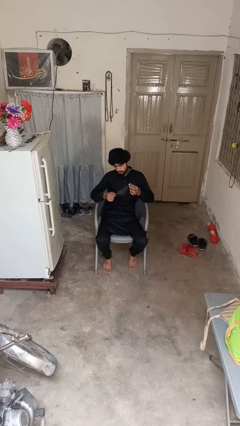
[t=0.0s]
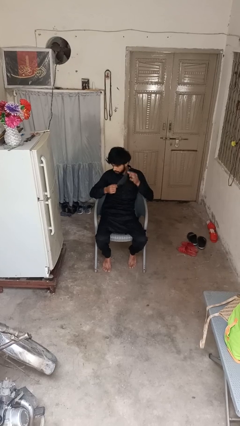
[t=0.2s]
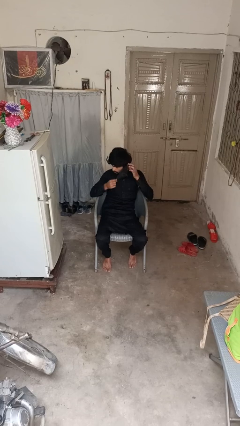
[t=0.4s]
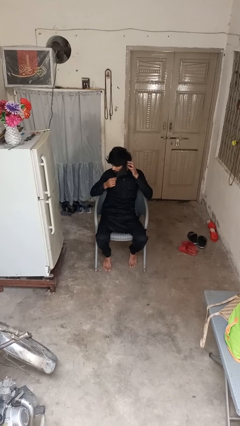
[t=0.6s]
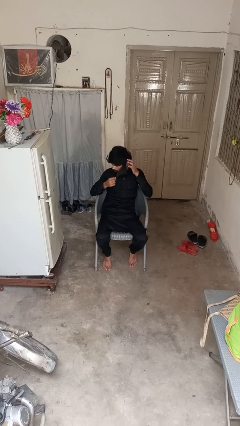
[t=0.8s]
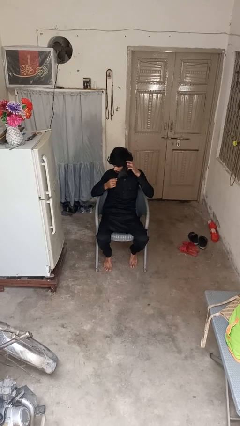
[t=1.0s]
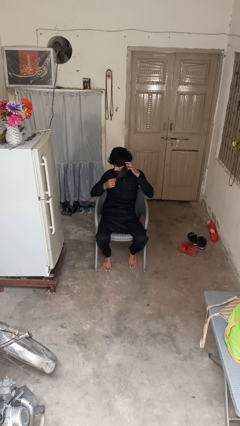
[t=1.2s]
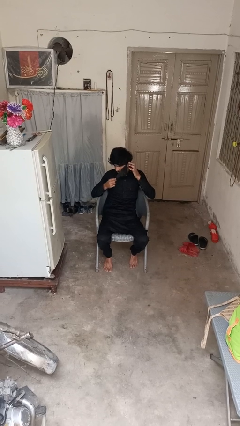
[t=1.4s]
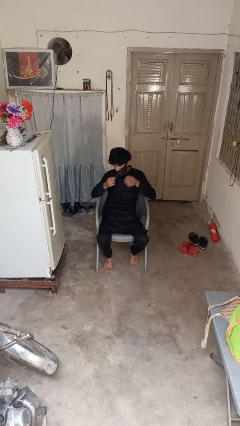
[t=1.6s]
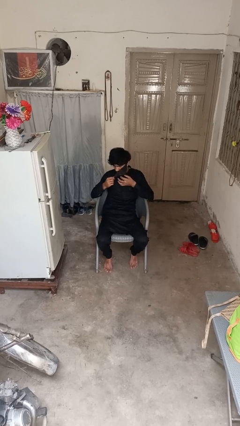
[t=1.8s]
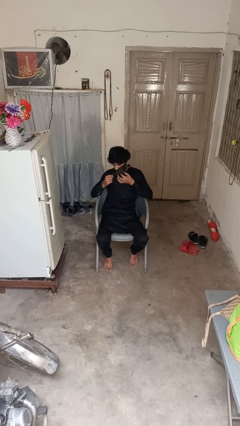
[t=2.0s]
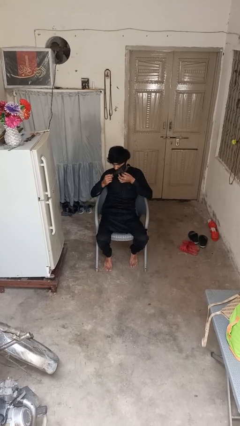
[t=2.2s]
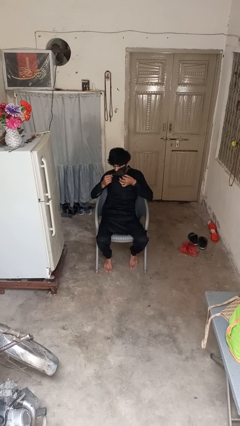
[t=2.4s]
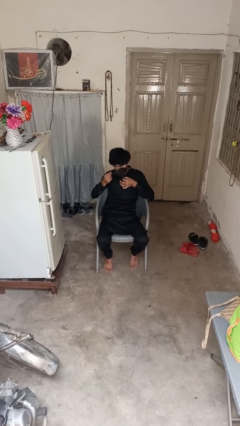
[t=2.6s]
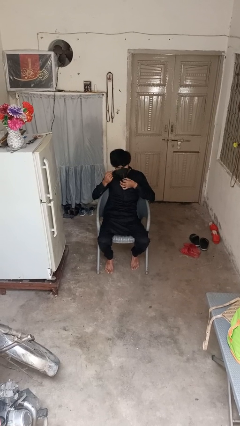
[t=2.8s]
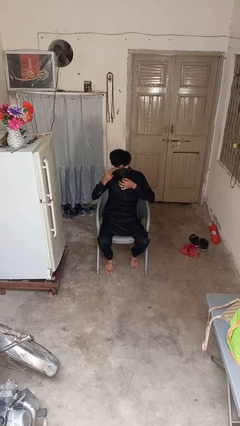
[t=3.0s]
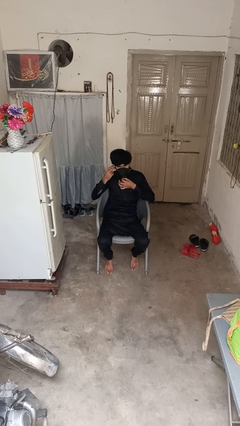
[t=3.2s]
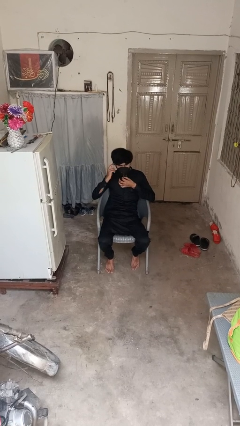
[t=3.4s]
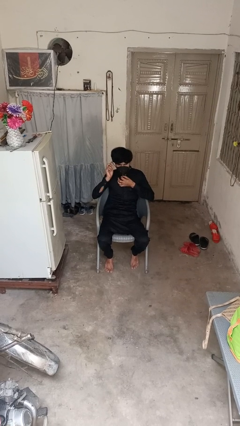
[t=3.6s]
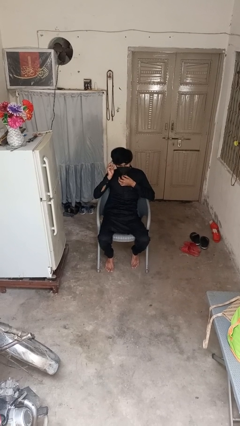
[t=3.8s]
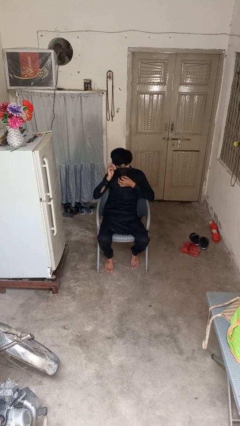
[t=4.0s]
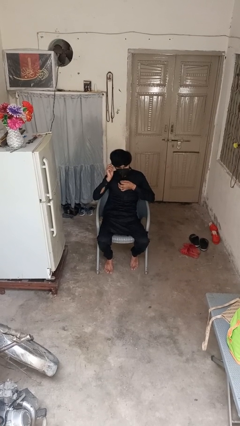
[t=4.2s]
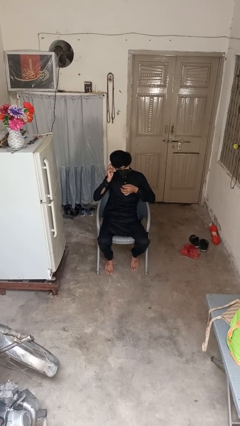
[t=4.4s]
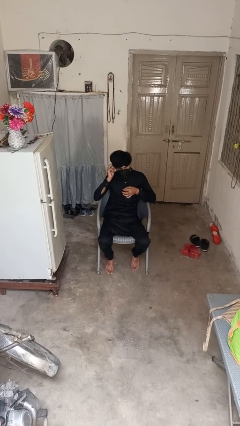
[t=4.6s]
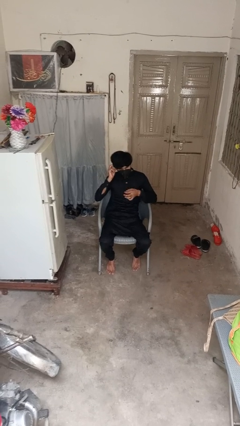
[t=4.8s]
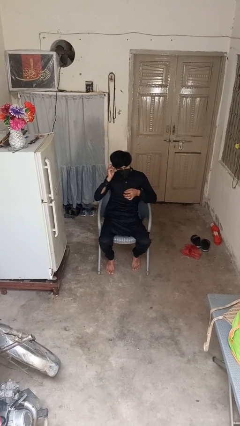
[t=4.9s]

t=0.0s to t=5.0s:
person puts on facemask

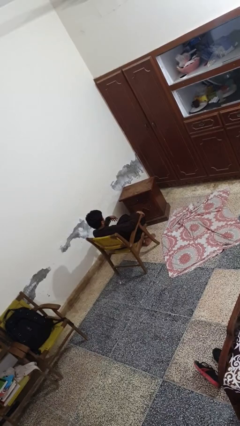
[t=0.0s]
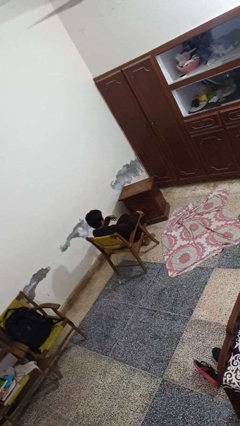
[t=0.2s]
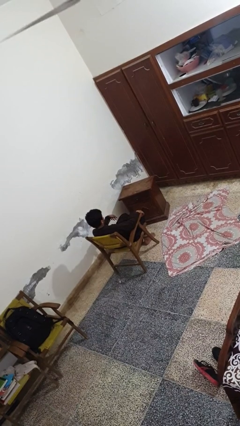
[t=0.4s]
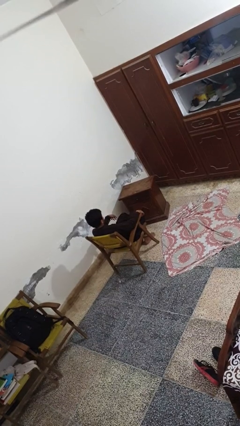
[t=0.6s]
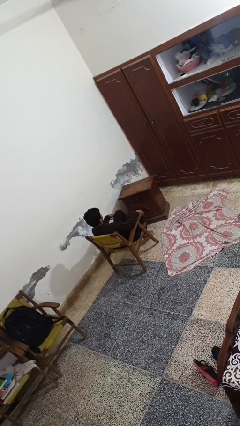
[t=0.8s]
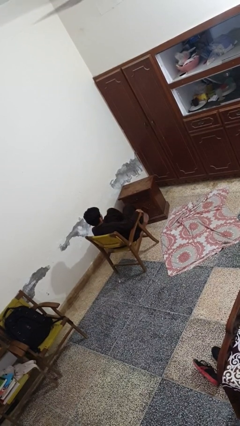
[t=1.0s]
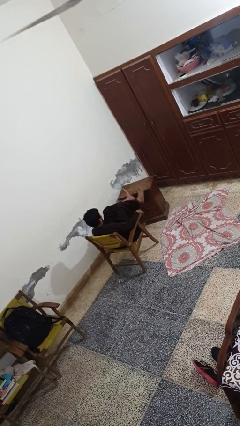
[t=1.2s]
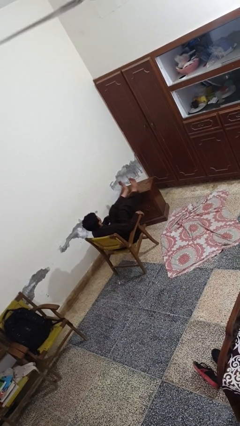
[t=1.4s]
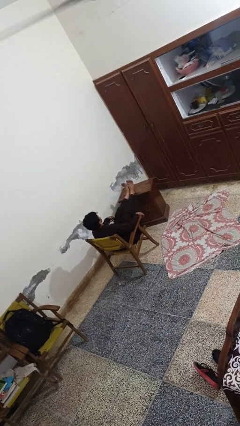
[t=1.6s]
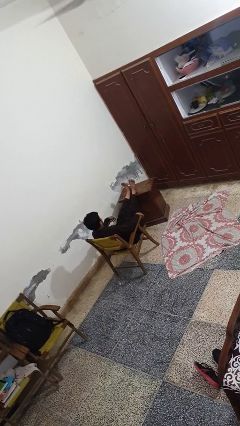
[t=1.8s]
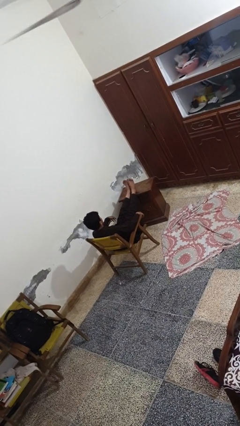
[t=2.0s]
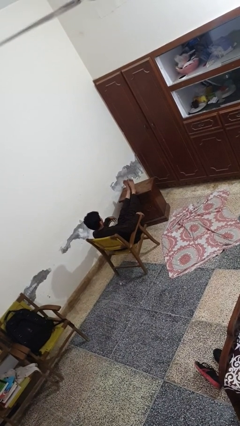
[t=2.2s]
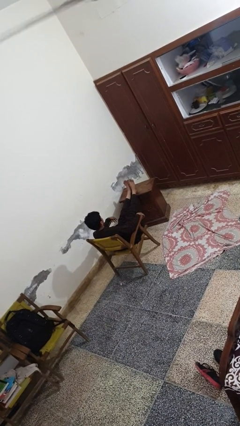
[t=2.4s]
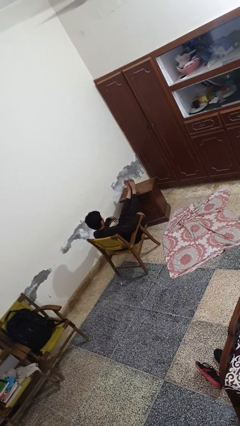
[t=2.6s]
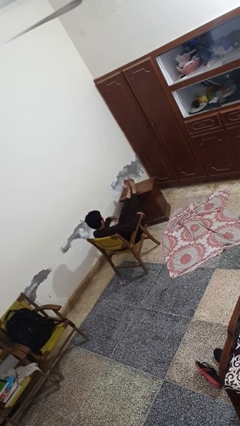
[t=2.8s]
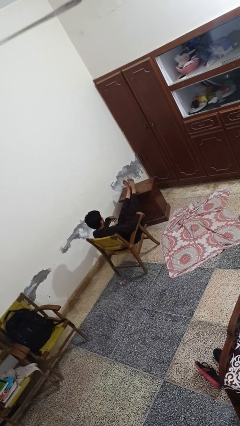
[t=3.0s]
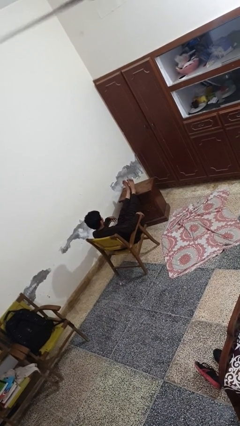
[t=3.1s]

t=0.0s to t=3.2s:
person puts feet up

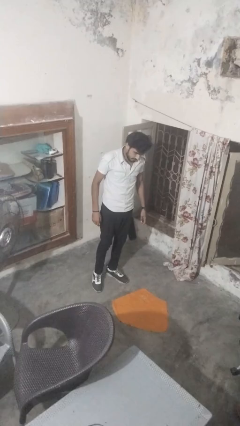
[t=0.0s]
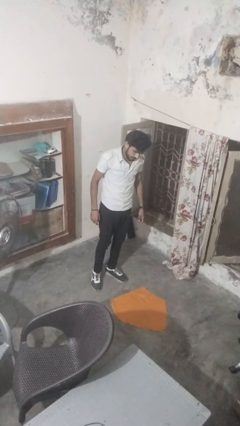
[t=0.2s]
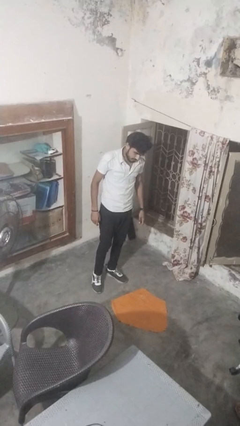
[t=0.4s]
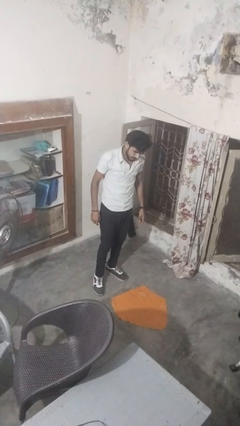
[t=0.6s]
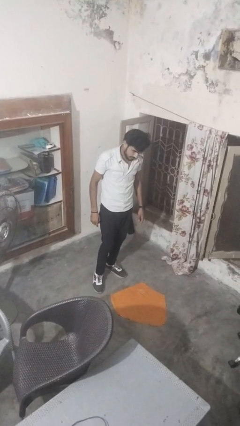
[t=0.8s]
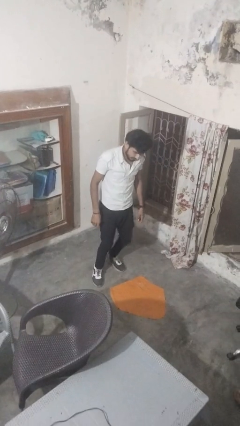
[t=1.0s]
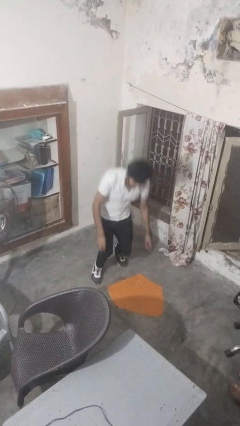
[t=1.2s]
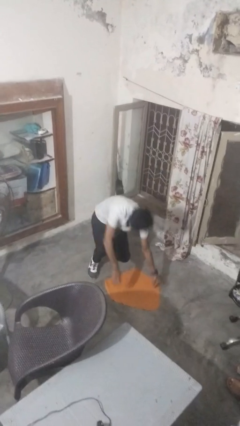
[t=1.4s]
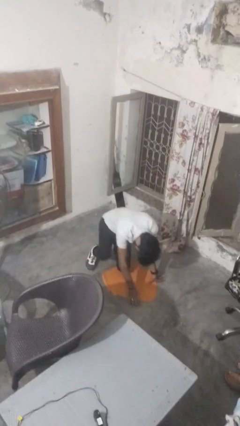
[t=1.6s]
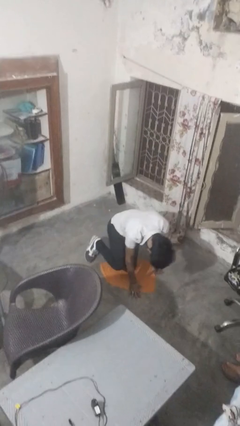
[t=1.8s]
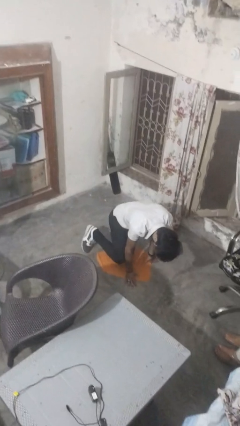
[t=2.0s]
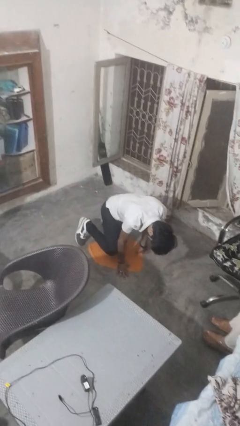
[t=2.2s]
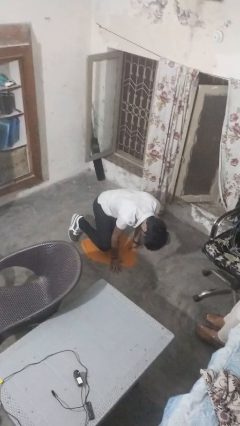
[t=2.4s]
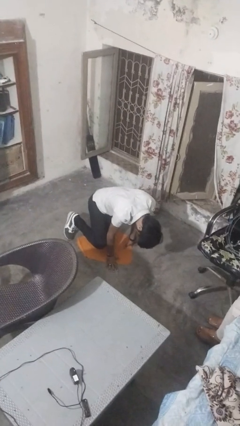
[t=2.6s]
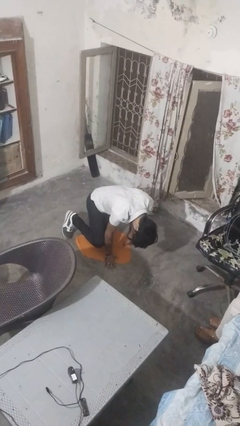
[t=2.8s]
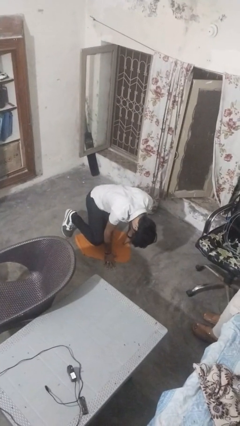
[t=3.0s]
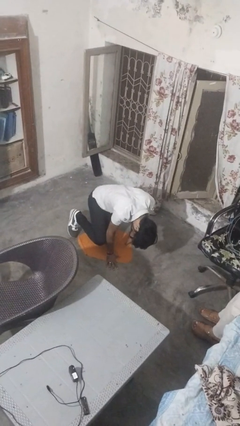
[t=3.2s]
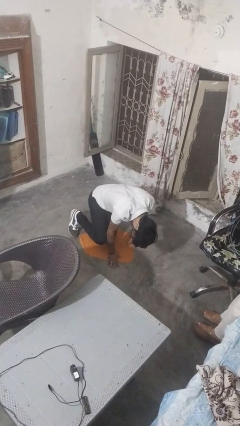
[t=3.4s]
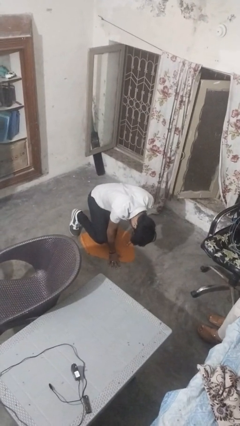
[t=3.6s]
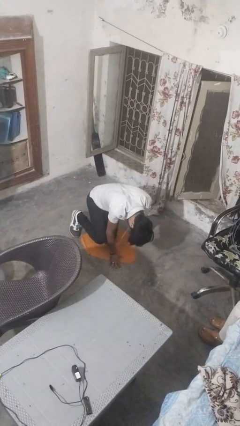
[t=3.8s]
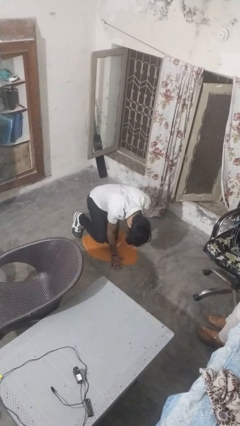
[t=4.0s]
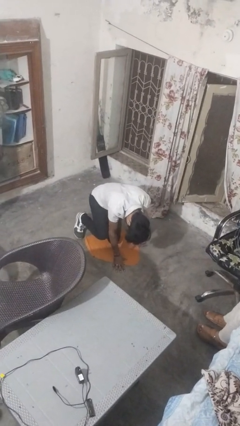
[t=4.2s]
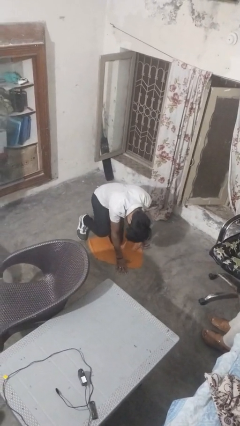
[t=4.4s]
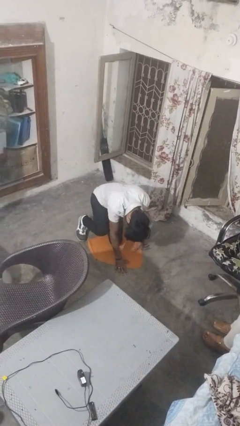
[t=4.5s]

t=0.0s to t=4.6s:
person falls while standing

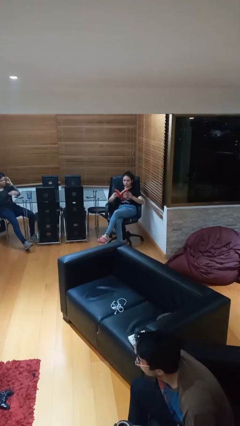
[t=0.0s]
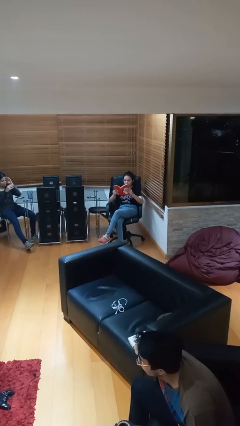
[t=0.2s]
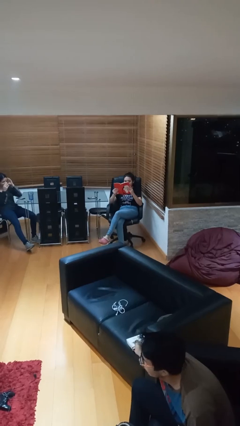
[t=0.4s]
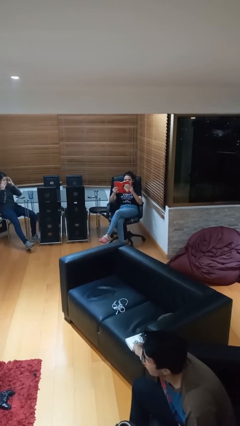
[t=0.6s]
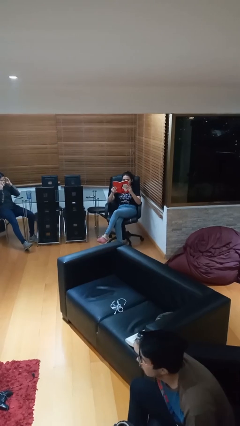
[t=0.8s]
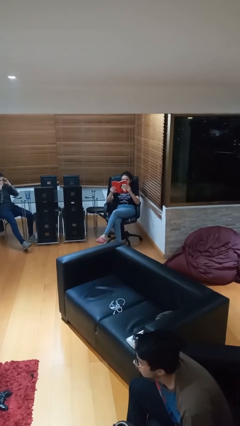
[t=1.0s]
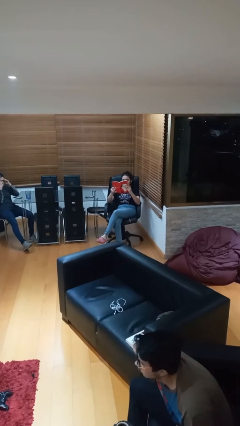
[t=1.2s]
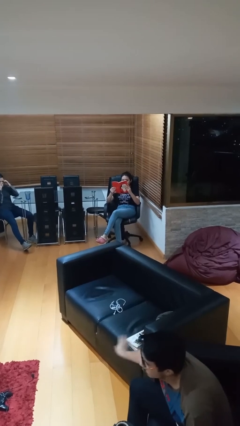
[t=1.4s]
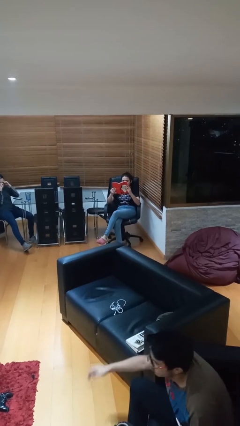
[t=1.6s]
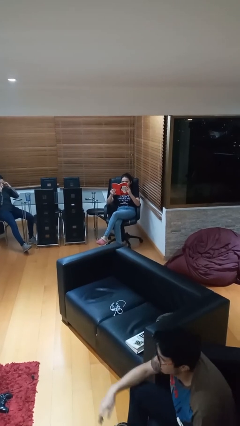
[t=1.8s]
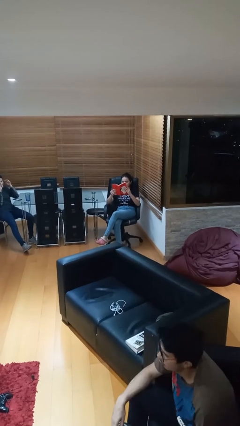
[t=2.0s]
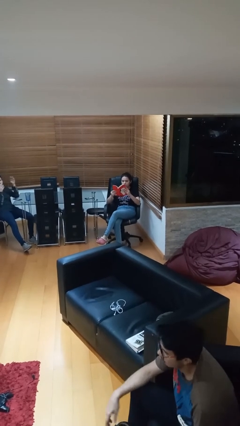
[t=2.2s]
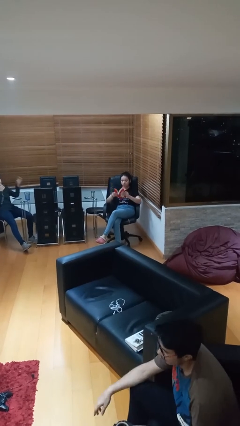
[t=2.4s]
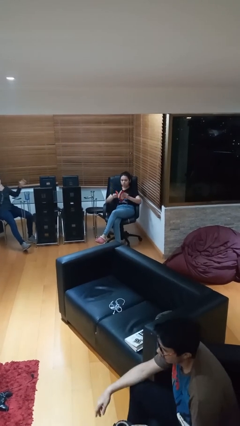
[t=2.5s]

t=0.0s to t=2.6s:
person reads document

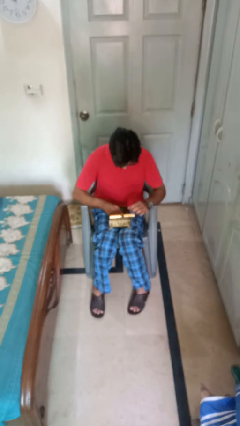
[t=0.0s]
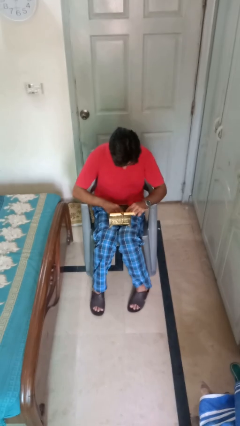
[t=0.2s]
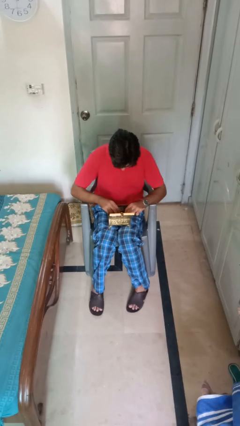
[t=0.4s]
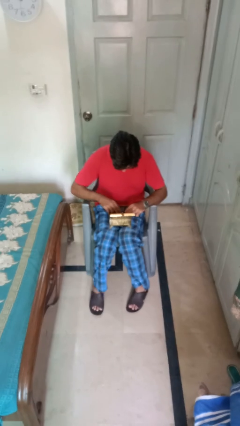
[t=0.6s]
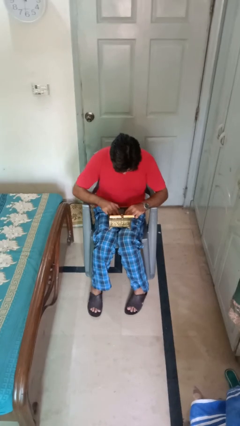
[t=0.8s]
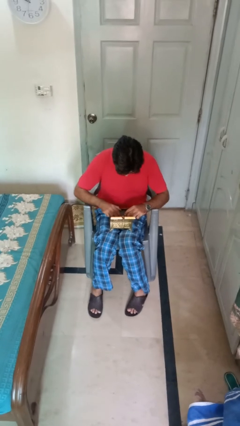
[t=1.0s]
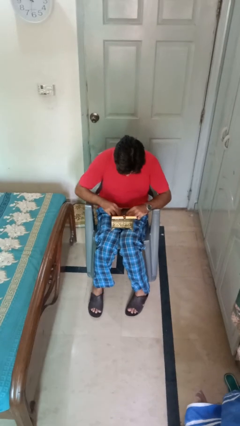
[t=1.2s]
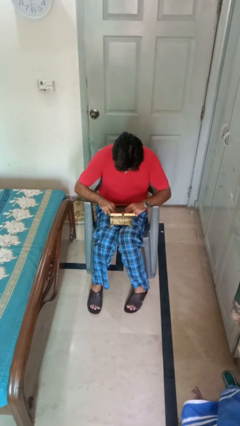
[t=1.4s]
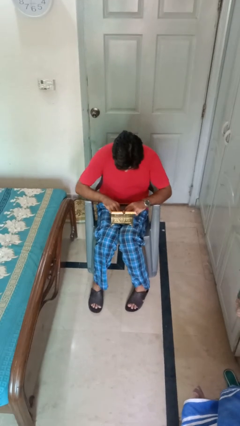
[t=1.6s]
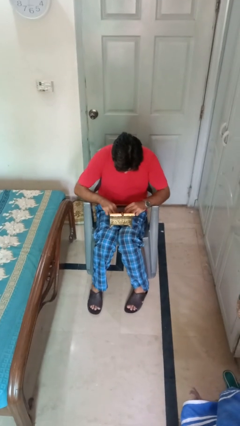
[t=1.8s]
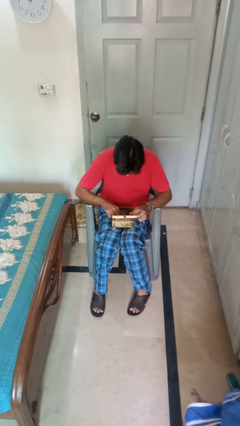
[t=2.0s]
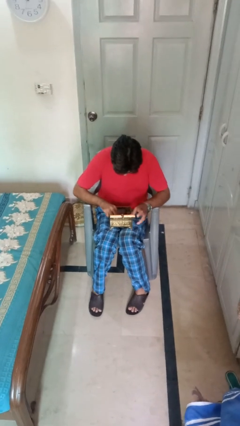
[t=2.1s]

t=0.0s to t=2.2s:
person searches jewelry box
